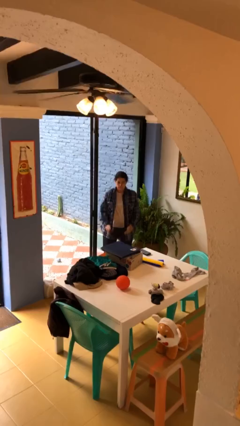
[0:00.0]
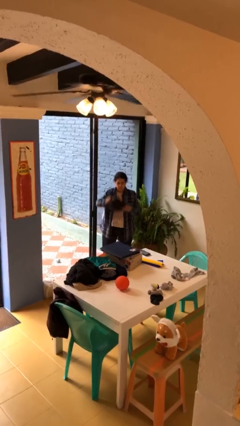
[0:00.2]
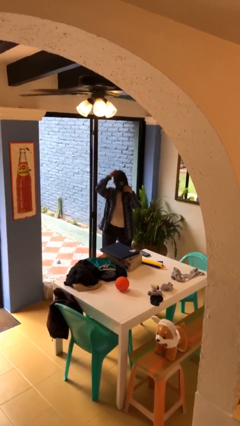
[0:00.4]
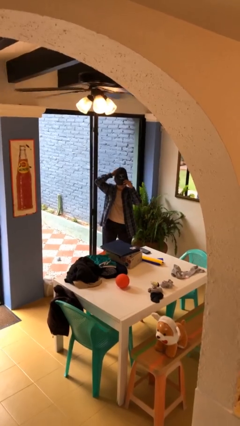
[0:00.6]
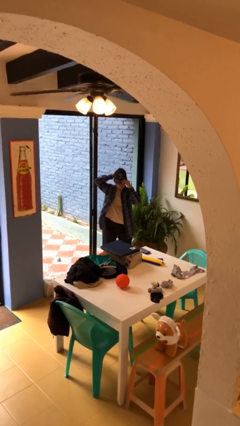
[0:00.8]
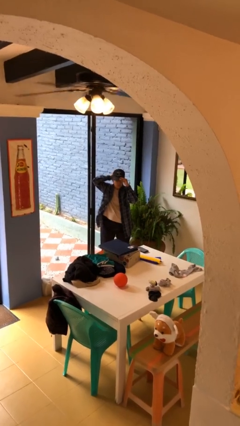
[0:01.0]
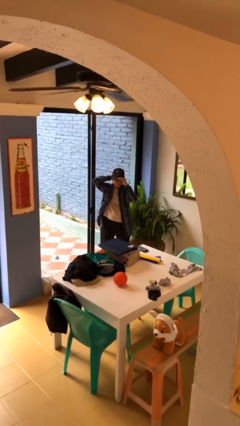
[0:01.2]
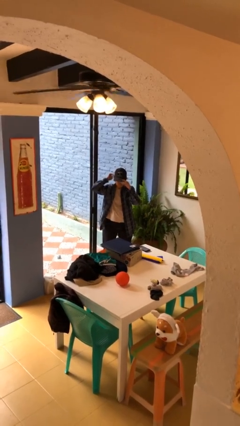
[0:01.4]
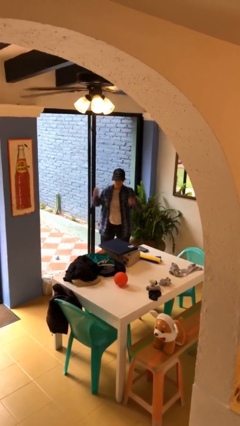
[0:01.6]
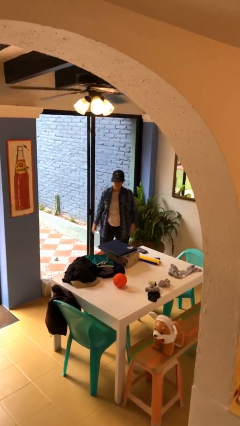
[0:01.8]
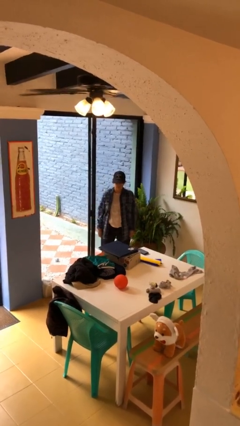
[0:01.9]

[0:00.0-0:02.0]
person puts on hat

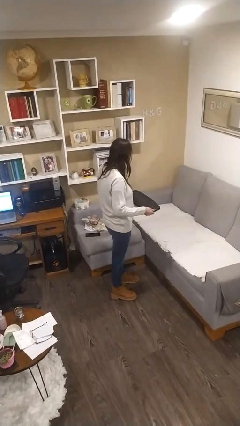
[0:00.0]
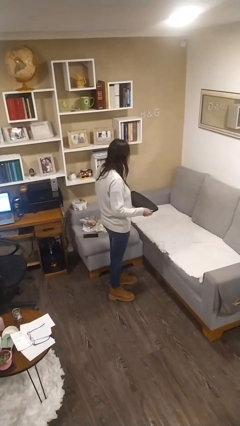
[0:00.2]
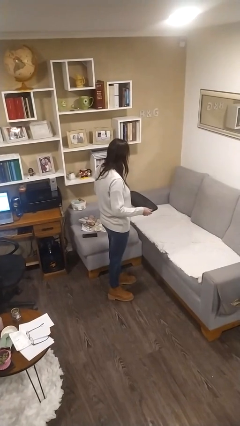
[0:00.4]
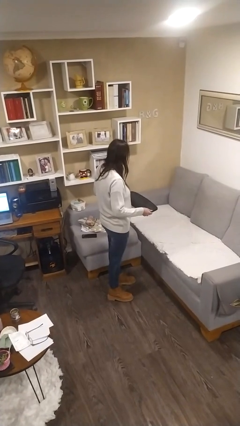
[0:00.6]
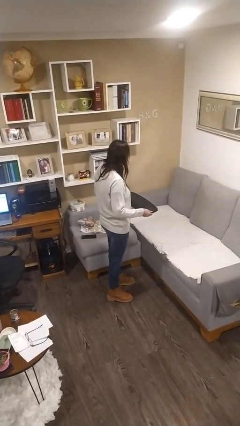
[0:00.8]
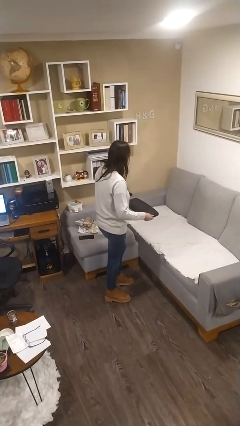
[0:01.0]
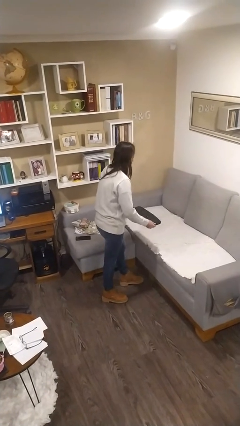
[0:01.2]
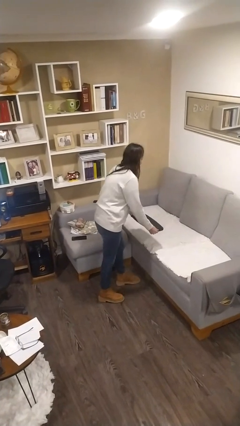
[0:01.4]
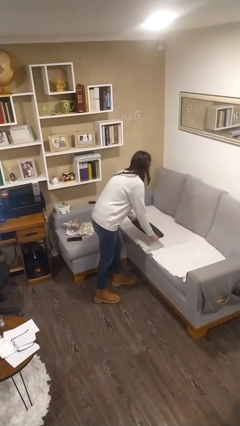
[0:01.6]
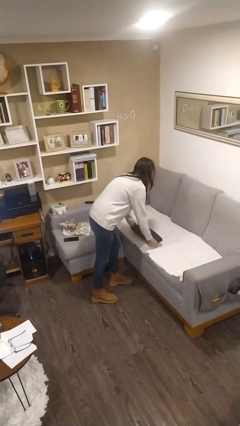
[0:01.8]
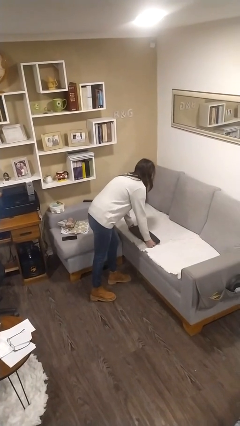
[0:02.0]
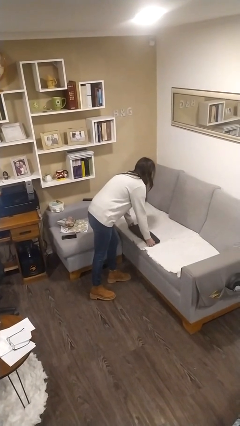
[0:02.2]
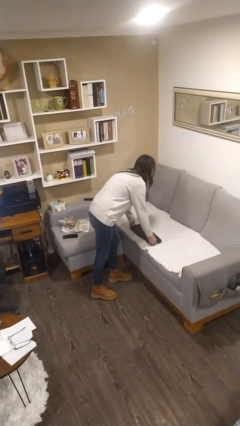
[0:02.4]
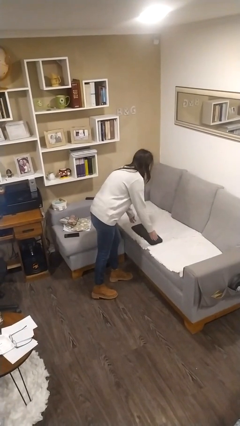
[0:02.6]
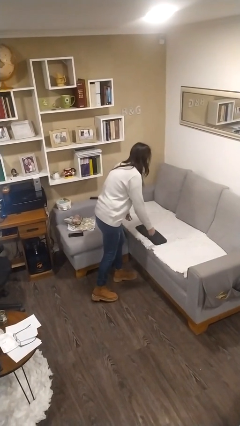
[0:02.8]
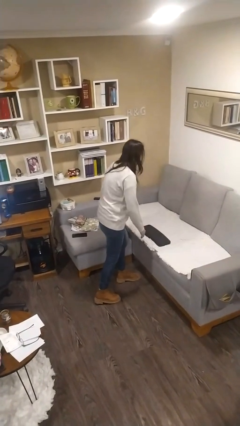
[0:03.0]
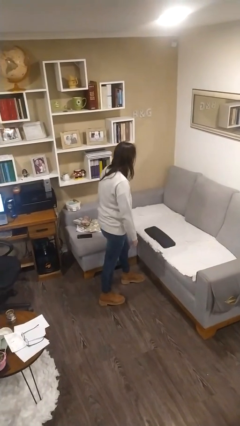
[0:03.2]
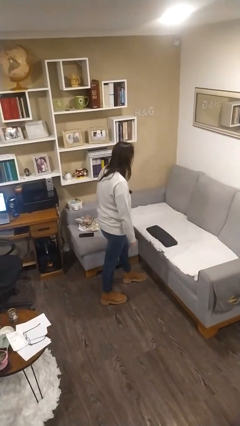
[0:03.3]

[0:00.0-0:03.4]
person puts down object on couch

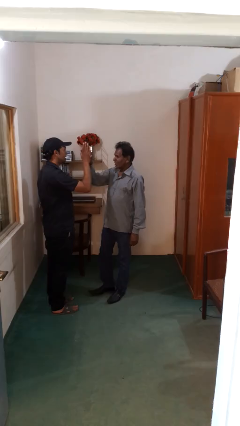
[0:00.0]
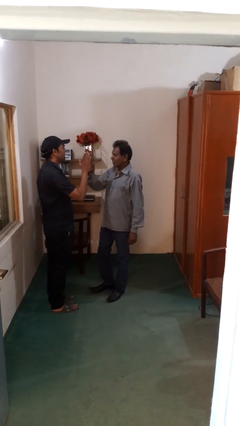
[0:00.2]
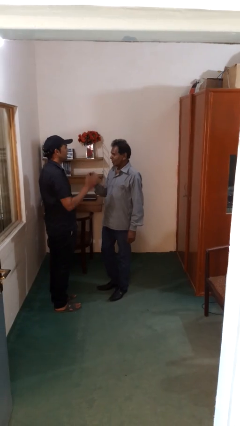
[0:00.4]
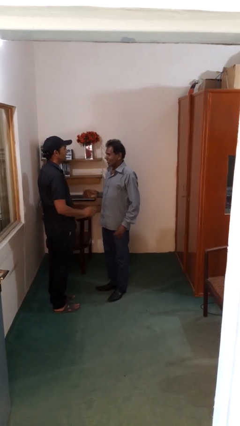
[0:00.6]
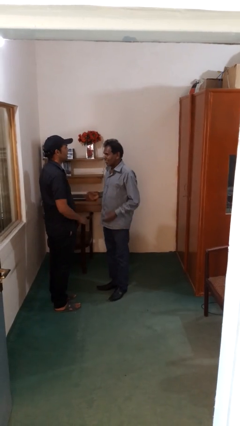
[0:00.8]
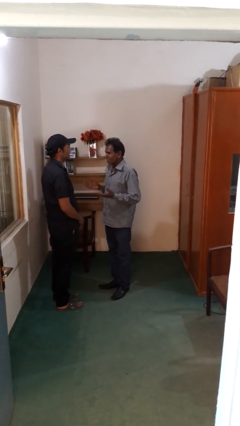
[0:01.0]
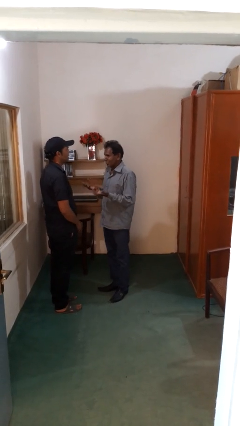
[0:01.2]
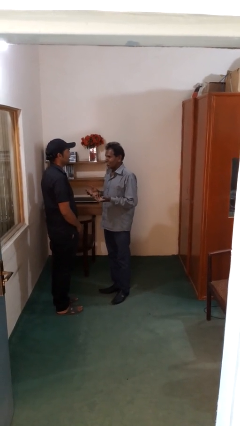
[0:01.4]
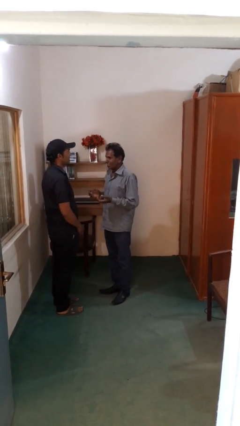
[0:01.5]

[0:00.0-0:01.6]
person highfives hand

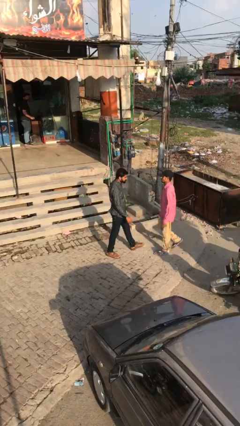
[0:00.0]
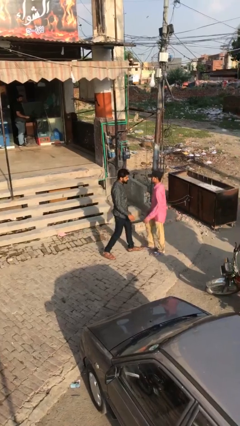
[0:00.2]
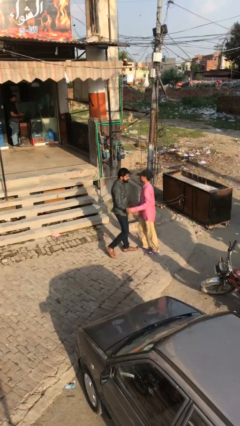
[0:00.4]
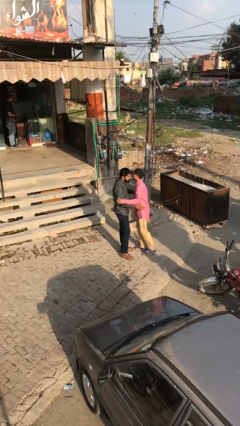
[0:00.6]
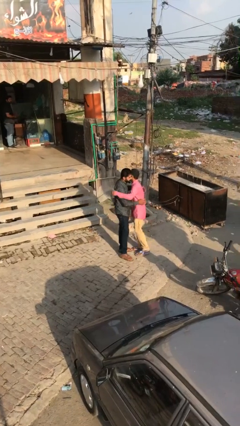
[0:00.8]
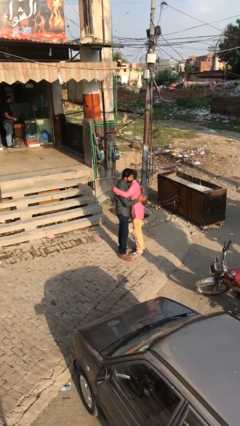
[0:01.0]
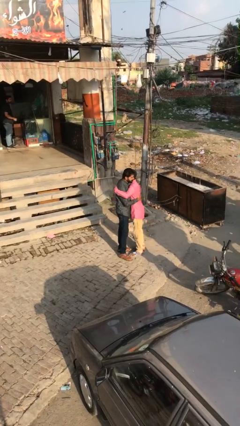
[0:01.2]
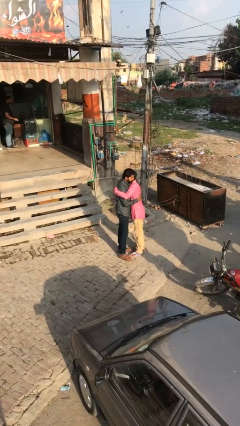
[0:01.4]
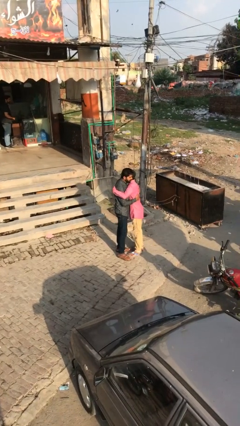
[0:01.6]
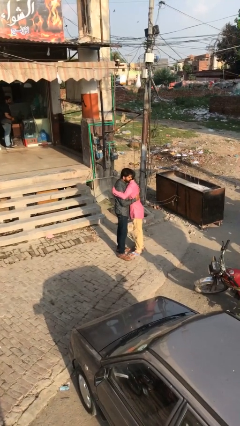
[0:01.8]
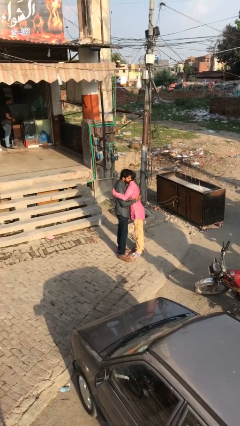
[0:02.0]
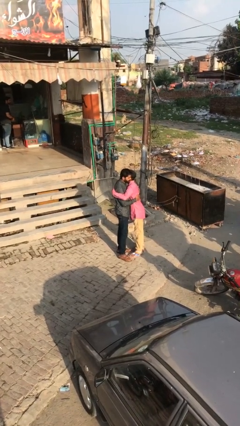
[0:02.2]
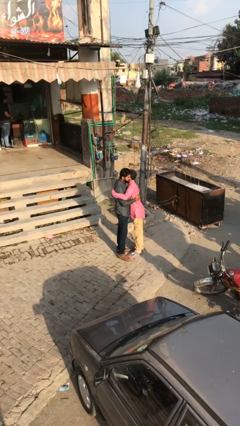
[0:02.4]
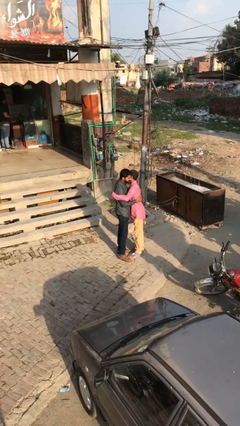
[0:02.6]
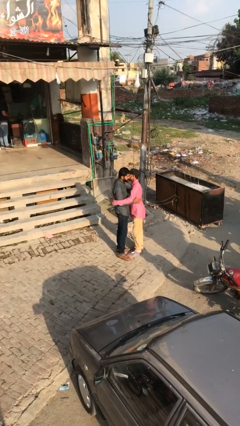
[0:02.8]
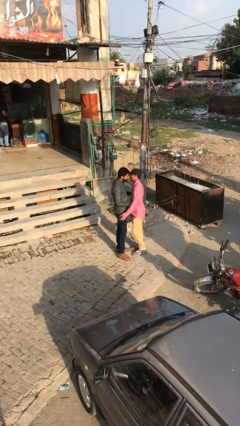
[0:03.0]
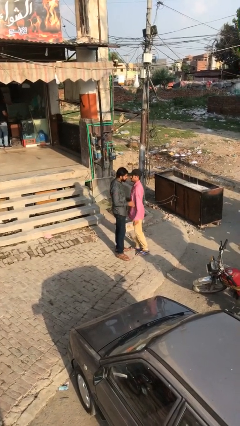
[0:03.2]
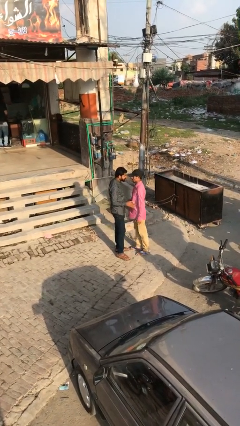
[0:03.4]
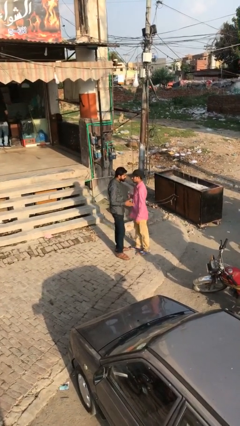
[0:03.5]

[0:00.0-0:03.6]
person embraces person

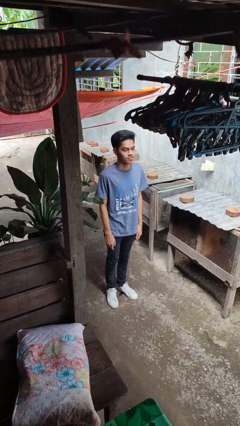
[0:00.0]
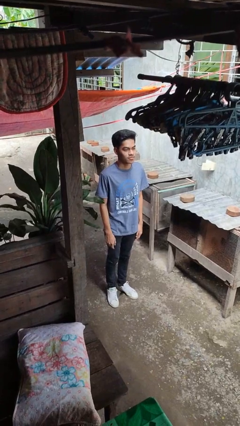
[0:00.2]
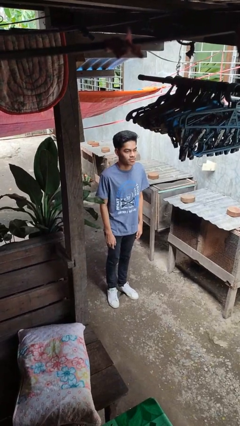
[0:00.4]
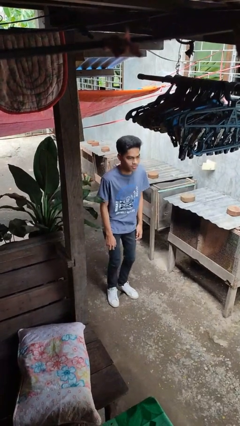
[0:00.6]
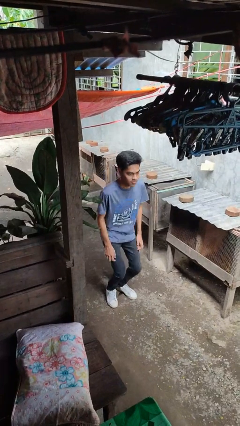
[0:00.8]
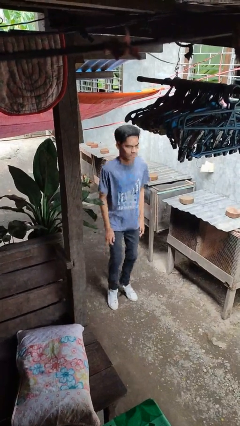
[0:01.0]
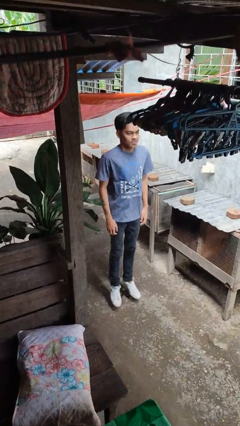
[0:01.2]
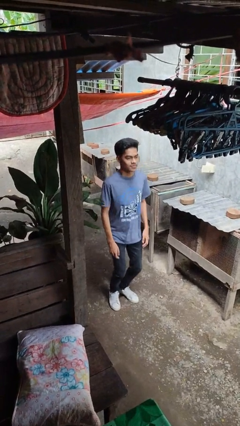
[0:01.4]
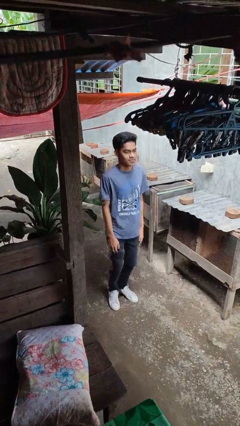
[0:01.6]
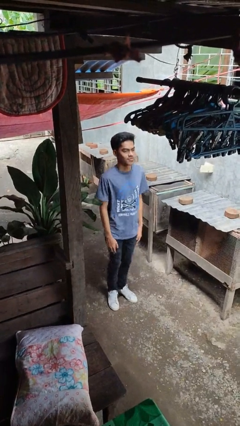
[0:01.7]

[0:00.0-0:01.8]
person jumps

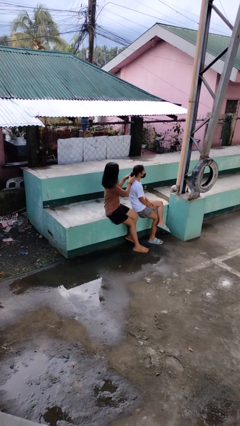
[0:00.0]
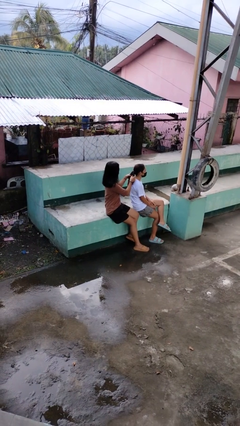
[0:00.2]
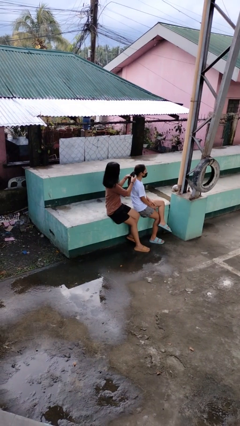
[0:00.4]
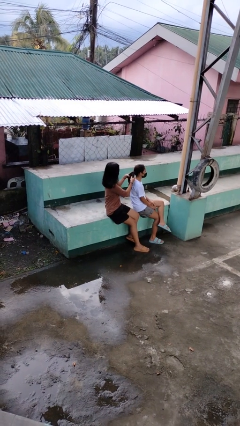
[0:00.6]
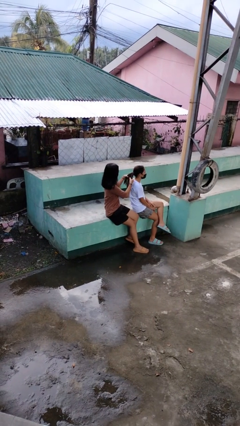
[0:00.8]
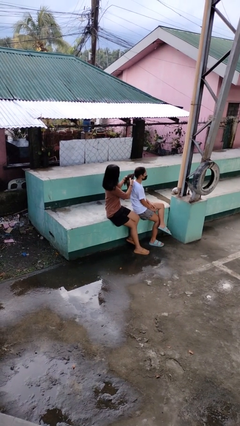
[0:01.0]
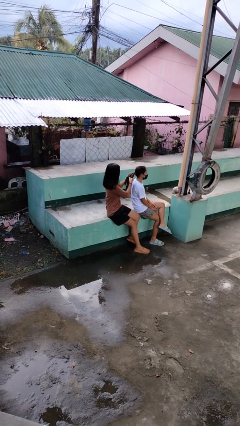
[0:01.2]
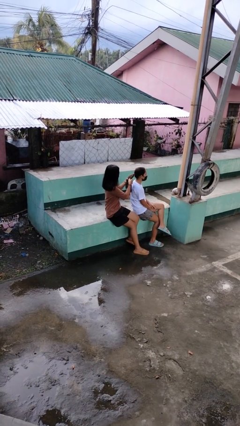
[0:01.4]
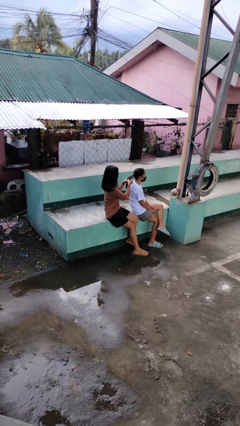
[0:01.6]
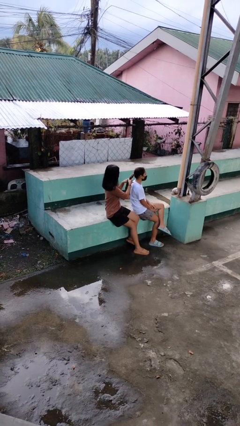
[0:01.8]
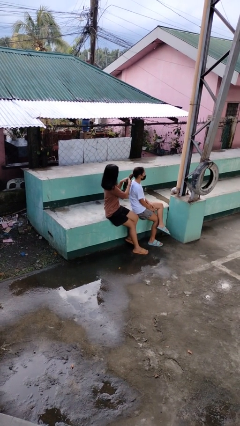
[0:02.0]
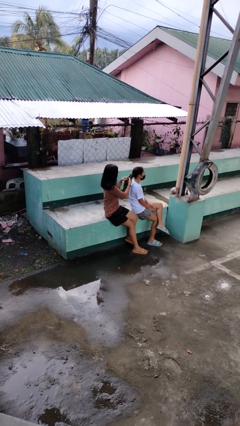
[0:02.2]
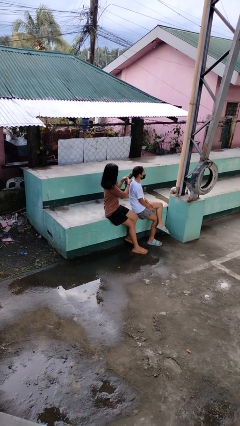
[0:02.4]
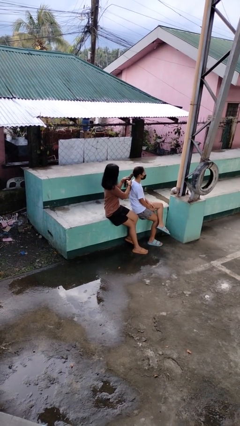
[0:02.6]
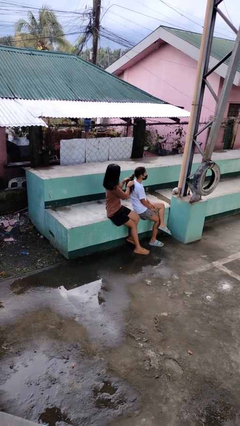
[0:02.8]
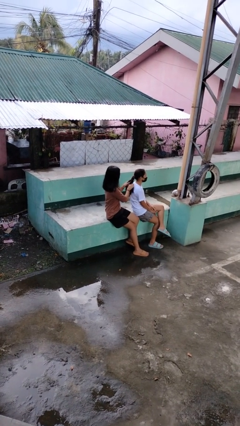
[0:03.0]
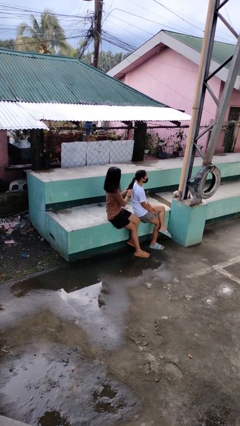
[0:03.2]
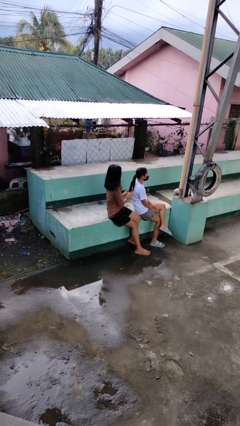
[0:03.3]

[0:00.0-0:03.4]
person braids hair of person

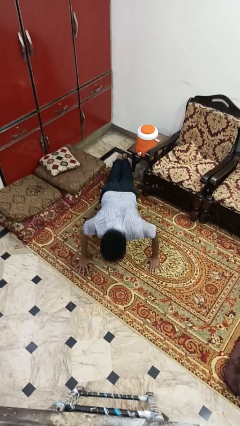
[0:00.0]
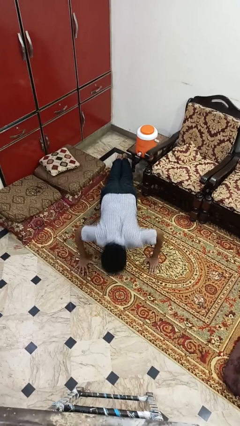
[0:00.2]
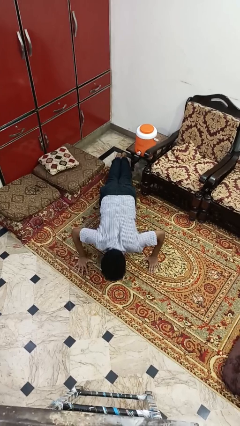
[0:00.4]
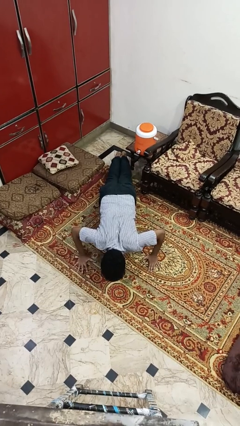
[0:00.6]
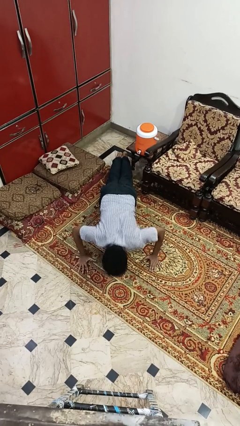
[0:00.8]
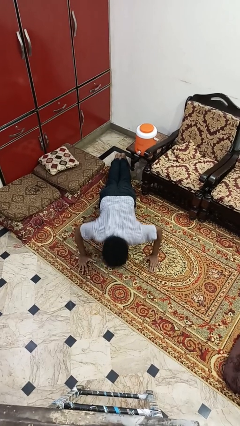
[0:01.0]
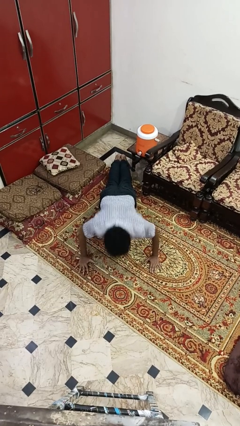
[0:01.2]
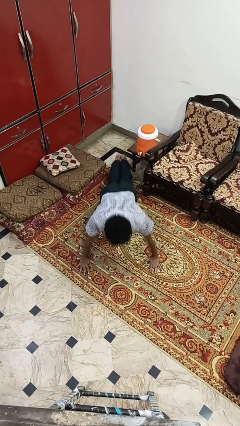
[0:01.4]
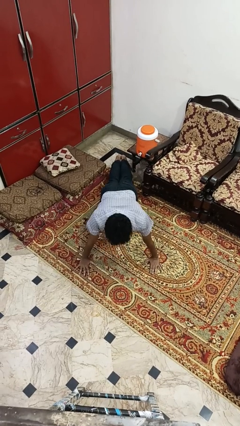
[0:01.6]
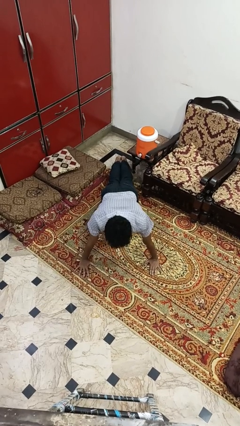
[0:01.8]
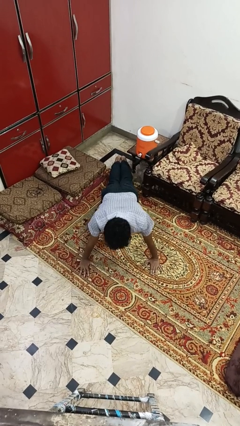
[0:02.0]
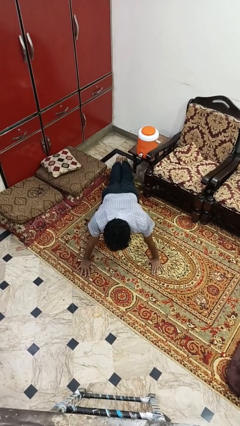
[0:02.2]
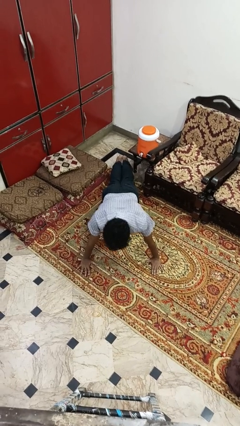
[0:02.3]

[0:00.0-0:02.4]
person exercises with pushup
